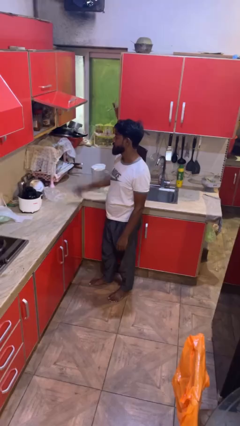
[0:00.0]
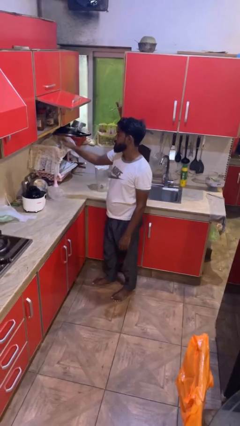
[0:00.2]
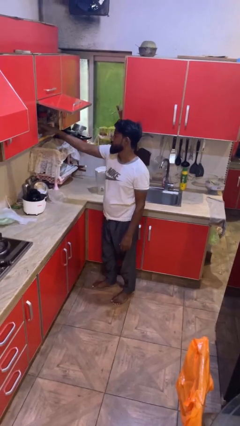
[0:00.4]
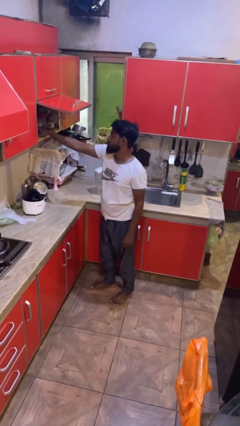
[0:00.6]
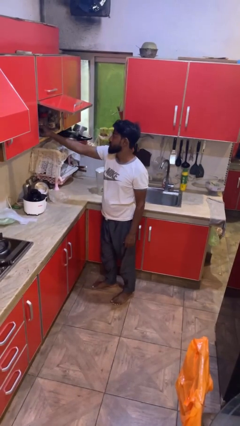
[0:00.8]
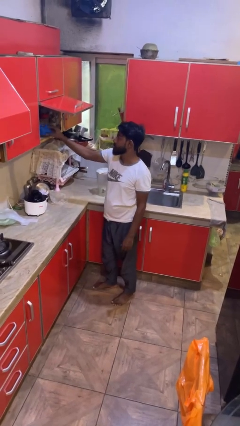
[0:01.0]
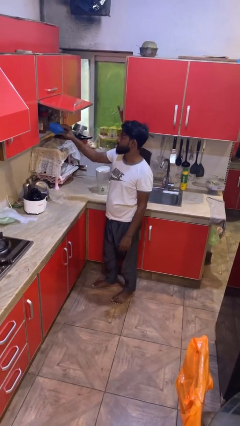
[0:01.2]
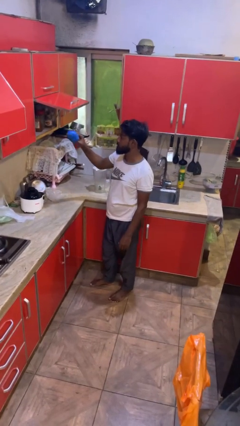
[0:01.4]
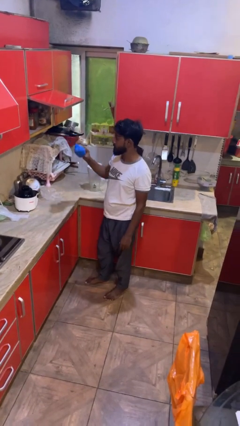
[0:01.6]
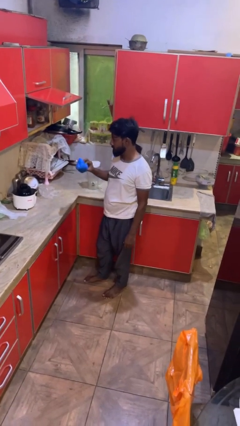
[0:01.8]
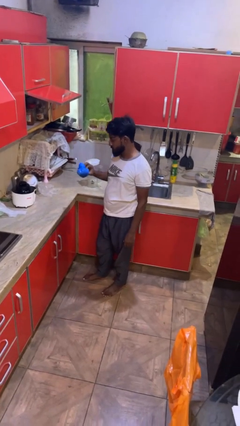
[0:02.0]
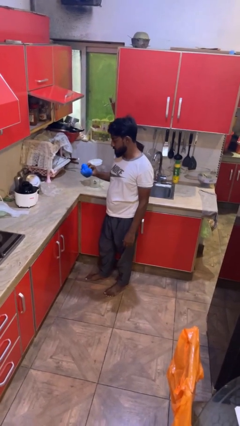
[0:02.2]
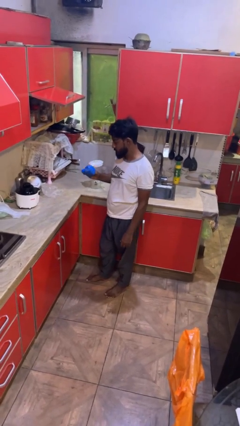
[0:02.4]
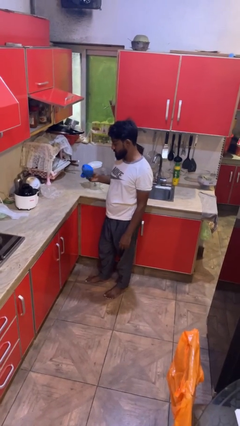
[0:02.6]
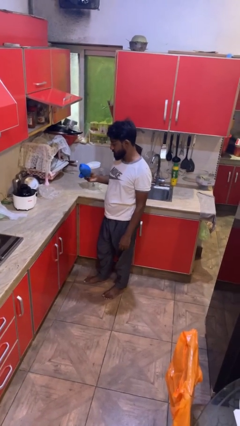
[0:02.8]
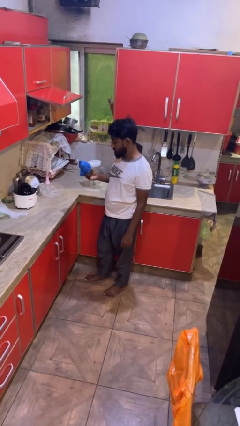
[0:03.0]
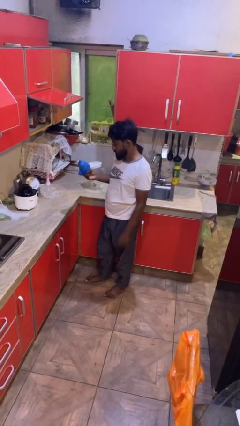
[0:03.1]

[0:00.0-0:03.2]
person picks up object from cabinet

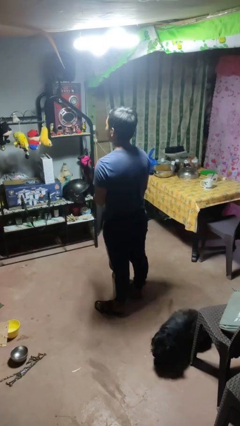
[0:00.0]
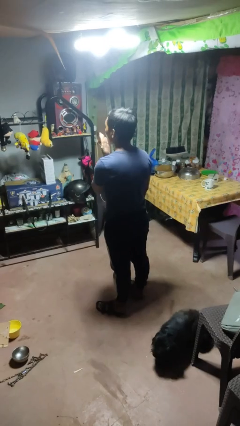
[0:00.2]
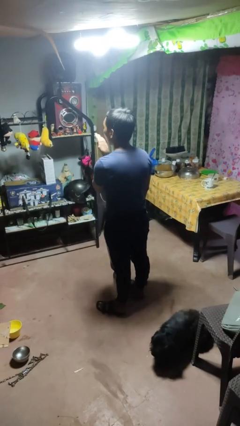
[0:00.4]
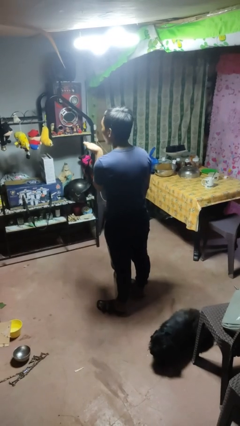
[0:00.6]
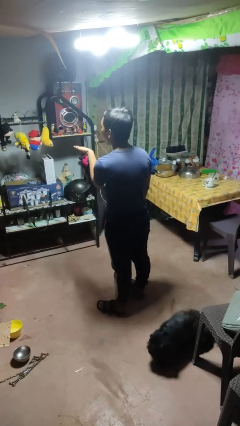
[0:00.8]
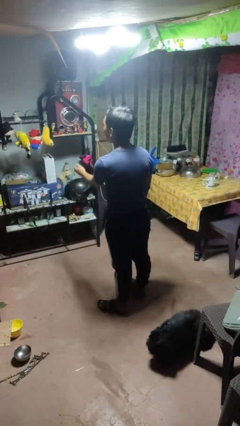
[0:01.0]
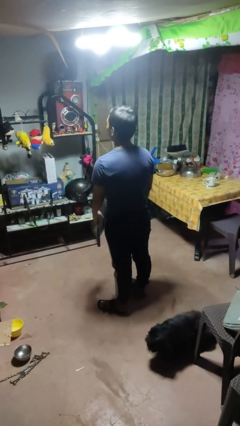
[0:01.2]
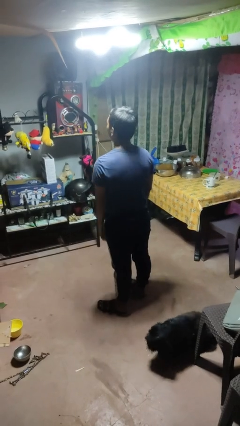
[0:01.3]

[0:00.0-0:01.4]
person gestures blow kiss

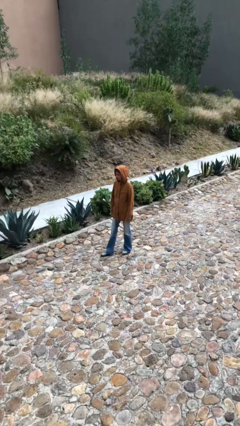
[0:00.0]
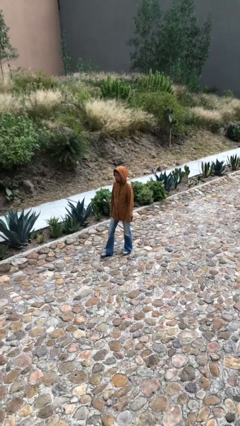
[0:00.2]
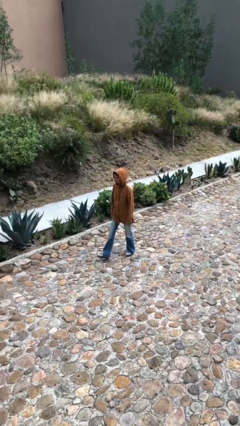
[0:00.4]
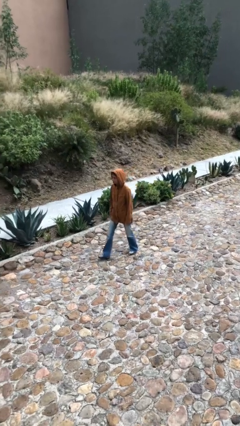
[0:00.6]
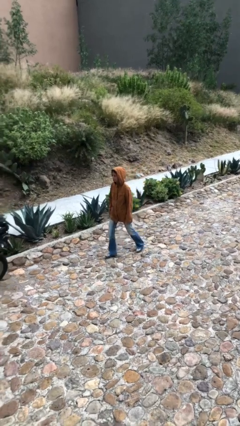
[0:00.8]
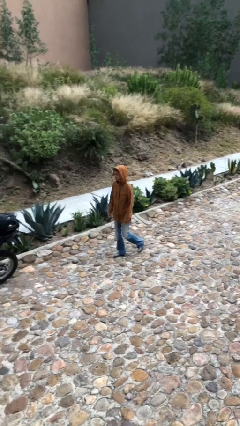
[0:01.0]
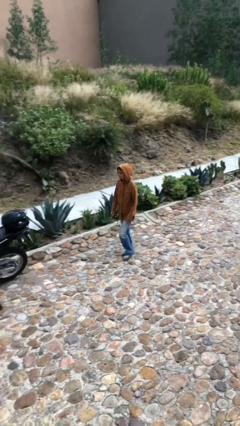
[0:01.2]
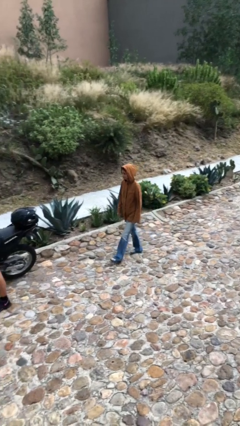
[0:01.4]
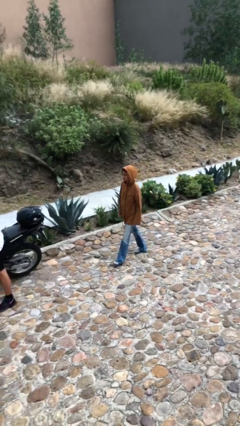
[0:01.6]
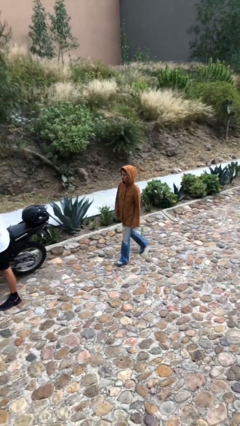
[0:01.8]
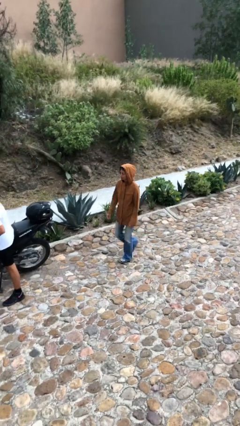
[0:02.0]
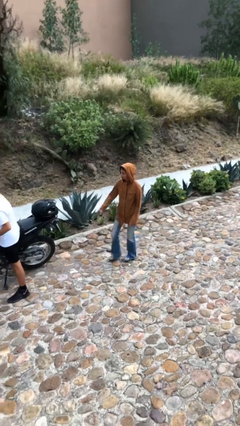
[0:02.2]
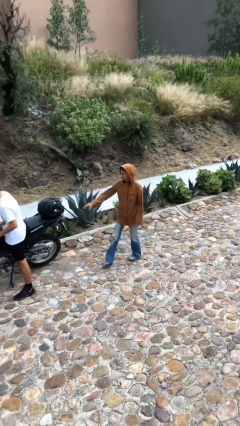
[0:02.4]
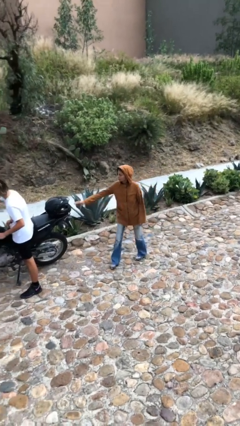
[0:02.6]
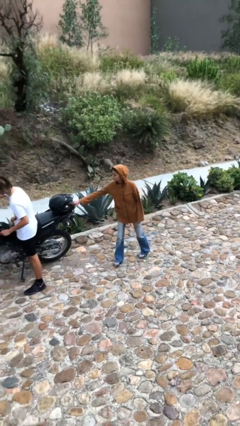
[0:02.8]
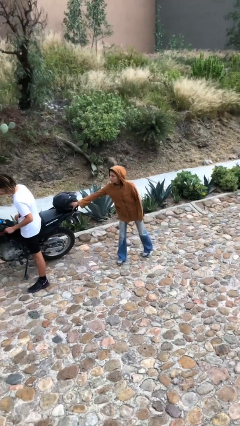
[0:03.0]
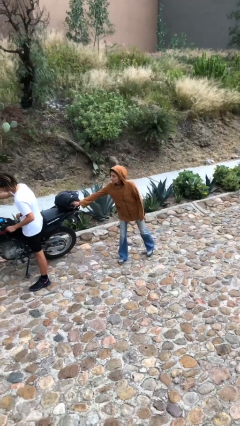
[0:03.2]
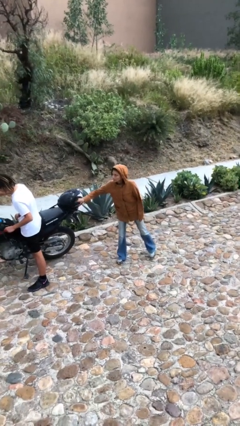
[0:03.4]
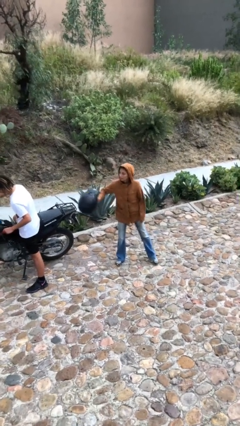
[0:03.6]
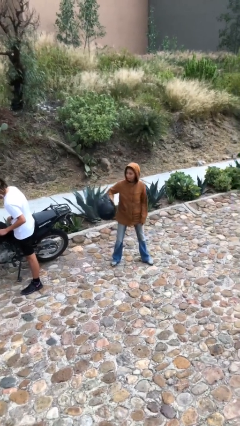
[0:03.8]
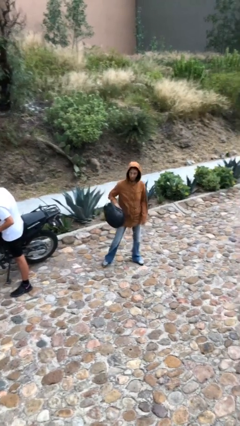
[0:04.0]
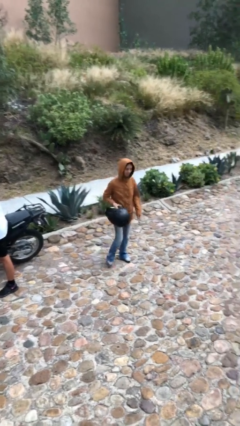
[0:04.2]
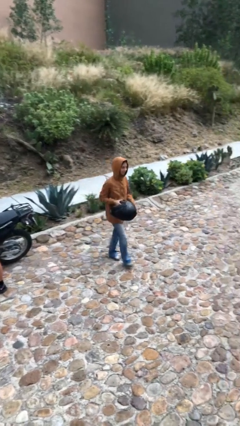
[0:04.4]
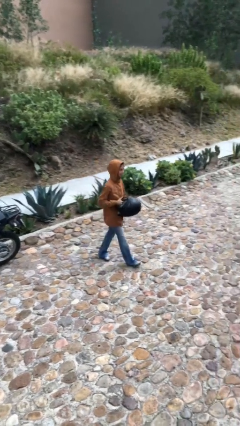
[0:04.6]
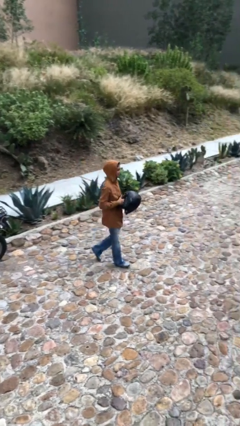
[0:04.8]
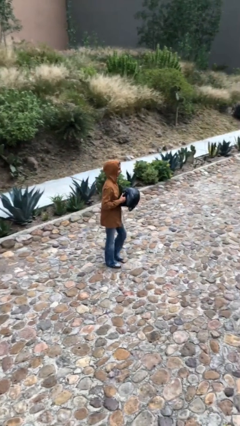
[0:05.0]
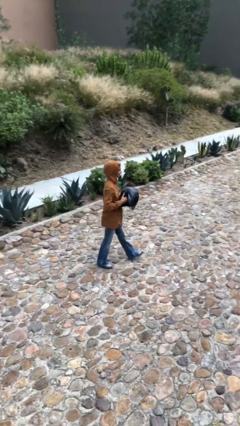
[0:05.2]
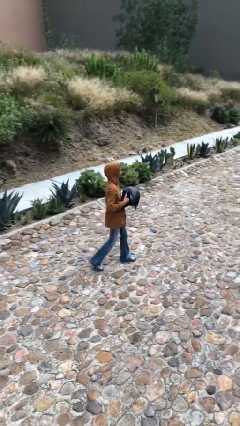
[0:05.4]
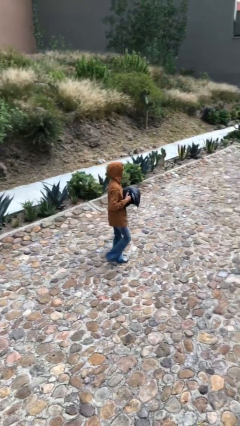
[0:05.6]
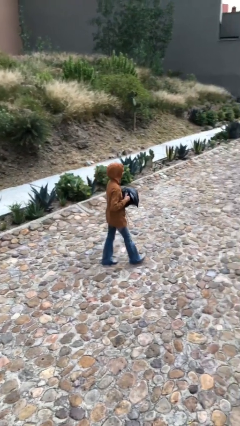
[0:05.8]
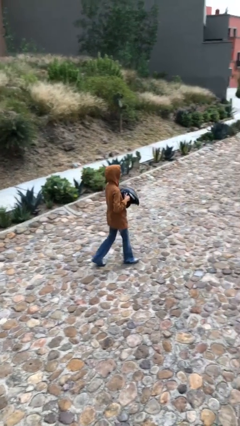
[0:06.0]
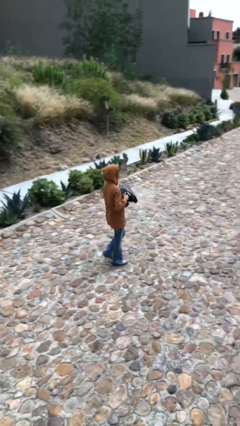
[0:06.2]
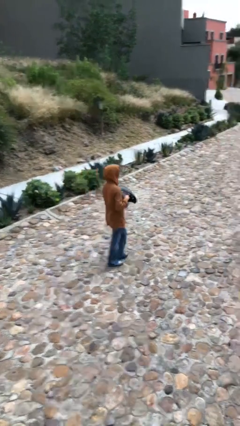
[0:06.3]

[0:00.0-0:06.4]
person steals object from person

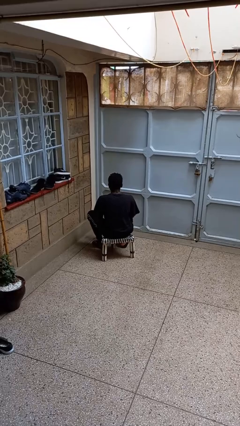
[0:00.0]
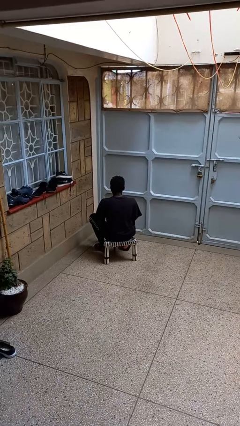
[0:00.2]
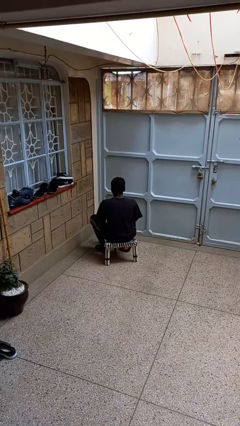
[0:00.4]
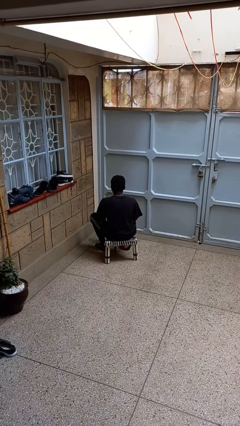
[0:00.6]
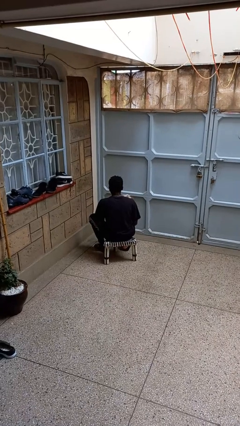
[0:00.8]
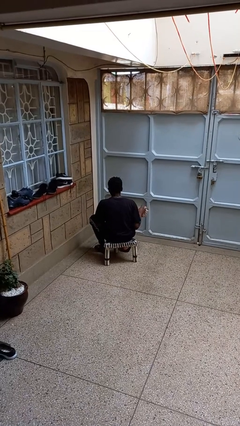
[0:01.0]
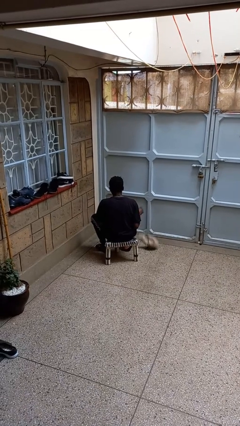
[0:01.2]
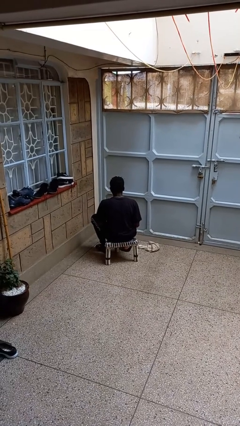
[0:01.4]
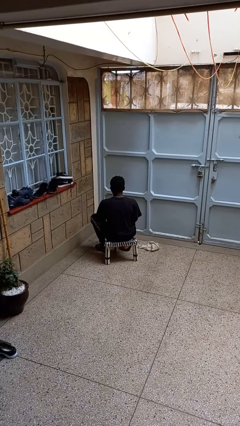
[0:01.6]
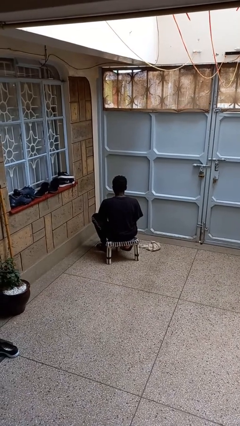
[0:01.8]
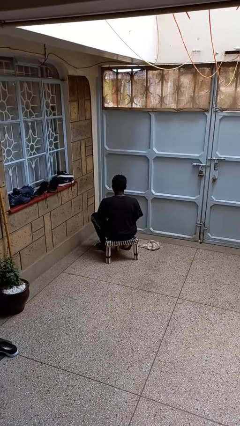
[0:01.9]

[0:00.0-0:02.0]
person throws object to ground

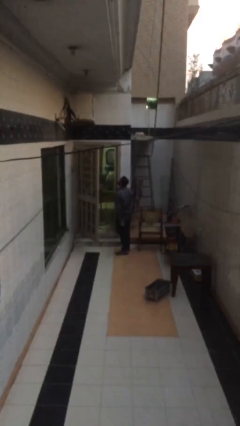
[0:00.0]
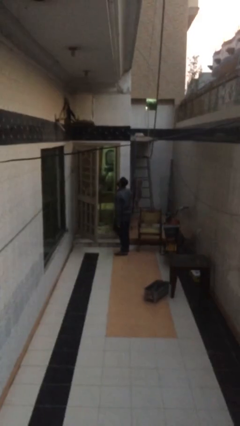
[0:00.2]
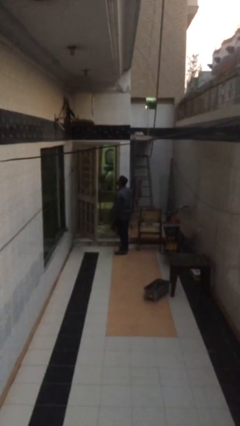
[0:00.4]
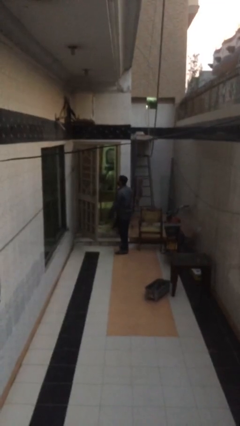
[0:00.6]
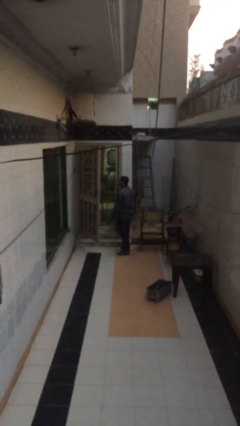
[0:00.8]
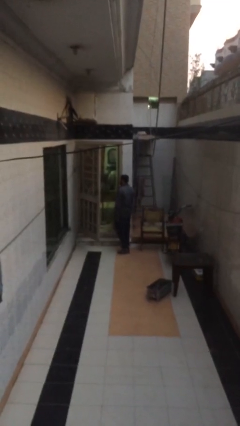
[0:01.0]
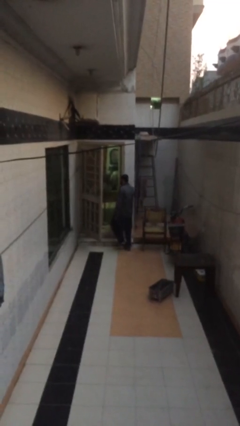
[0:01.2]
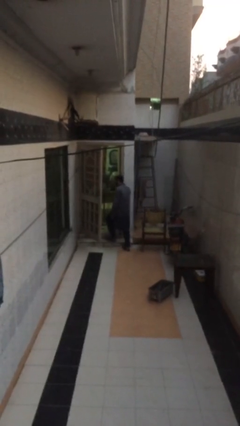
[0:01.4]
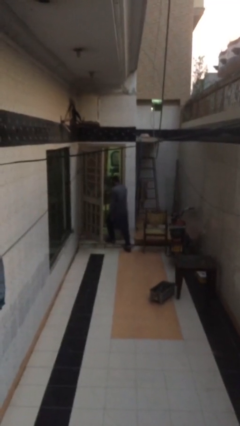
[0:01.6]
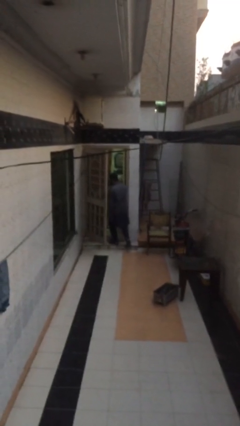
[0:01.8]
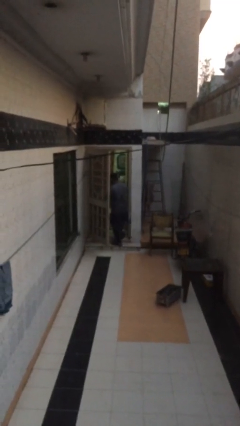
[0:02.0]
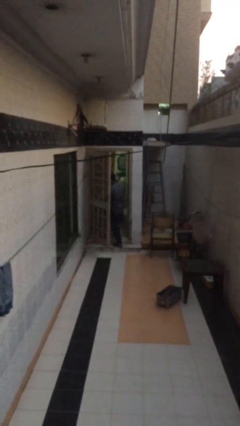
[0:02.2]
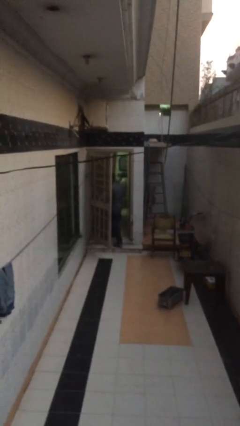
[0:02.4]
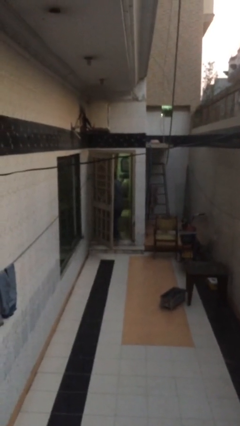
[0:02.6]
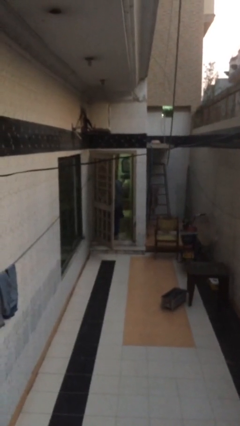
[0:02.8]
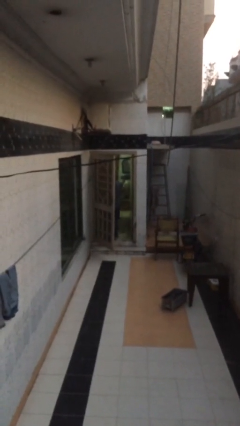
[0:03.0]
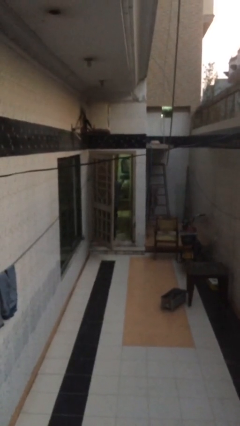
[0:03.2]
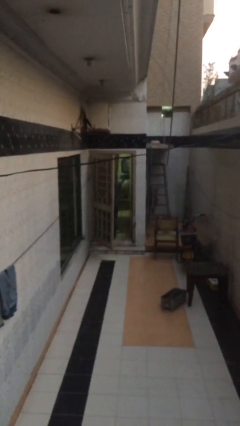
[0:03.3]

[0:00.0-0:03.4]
person exits scene through structure

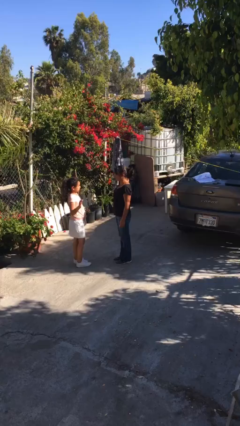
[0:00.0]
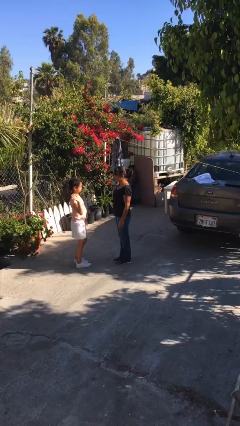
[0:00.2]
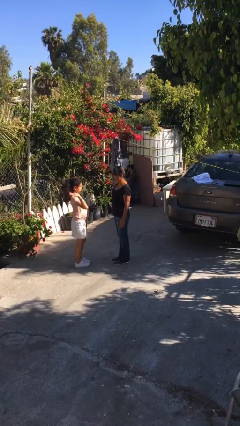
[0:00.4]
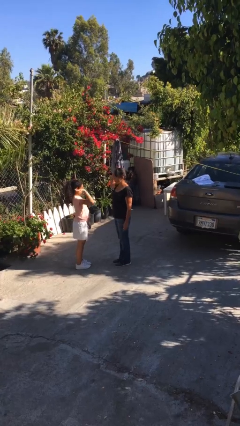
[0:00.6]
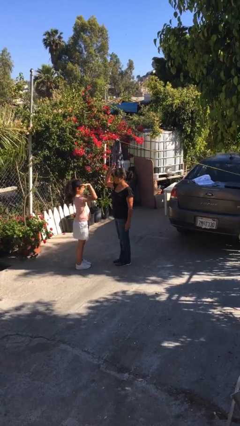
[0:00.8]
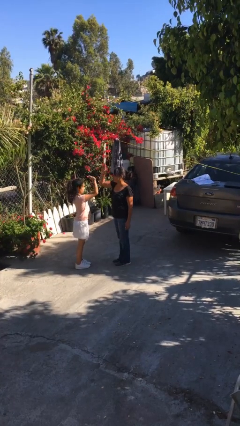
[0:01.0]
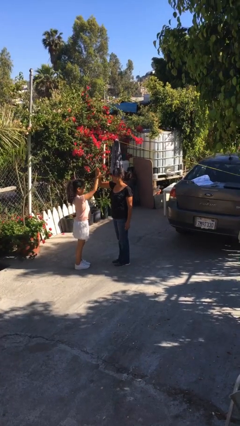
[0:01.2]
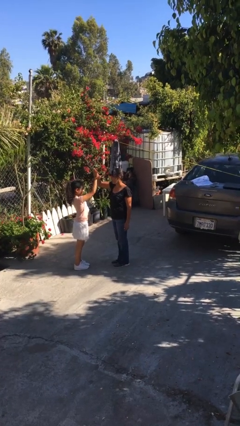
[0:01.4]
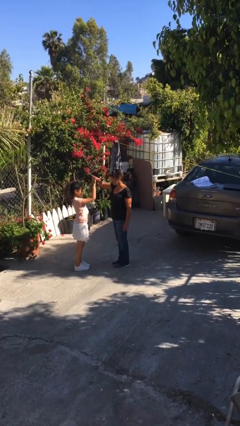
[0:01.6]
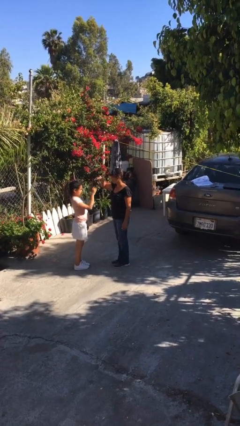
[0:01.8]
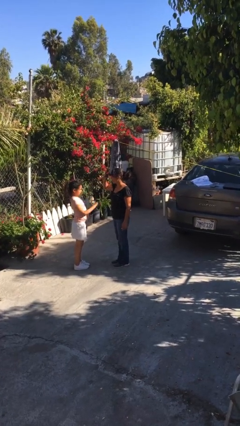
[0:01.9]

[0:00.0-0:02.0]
person highfives hand
